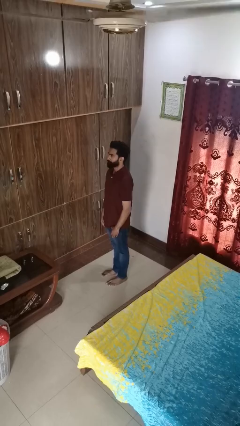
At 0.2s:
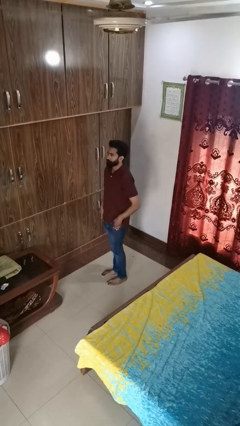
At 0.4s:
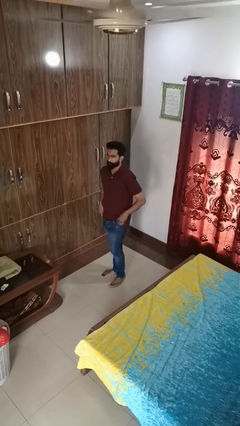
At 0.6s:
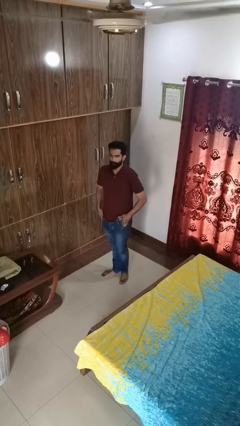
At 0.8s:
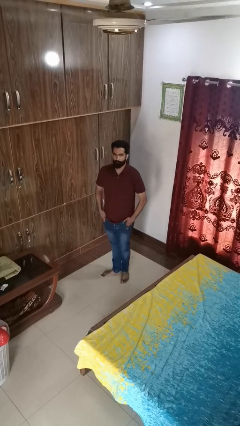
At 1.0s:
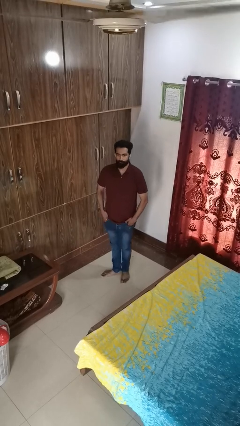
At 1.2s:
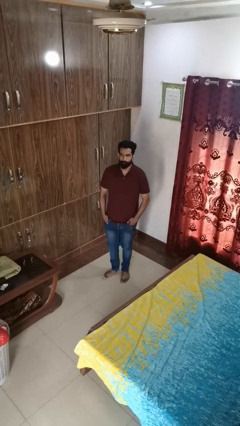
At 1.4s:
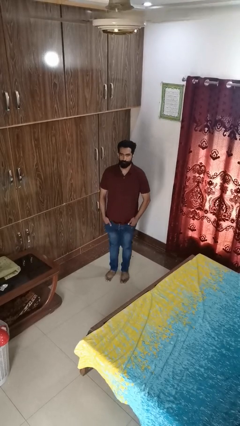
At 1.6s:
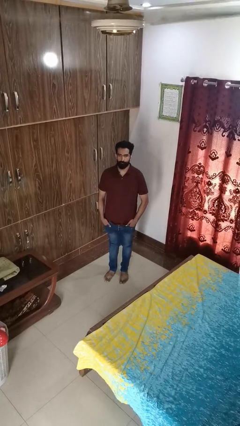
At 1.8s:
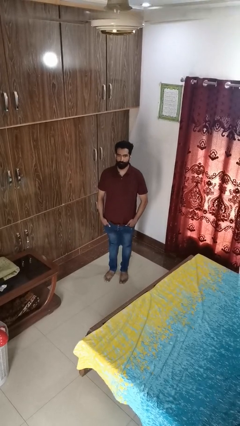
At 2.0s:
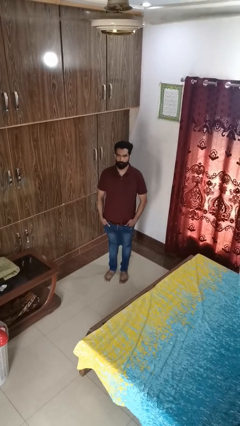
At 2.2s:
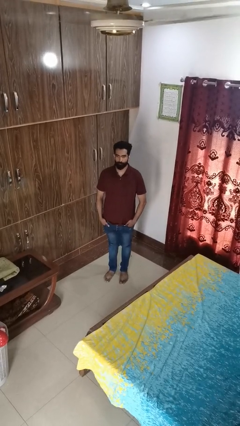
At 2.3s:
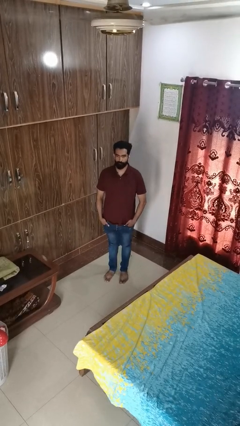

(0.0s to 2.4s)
person puts hands in back pockets

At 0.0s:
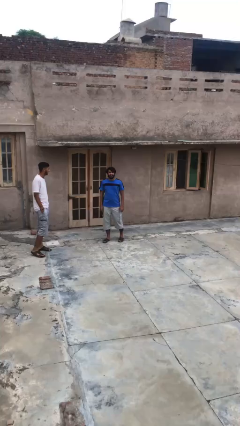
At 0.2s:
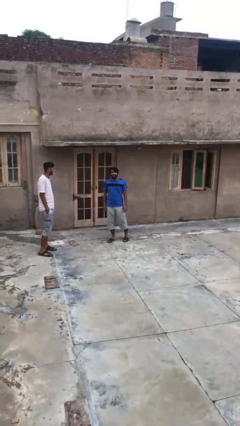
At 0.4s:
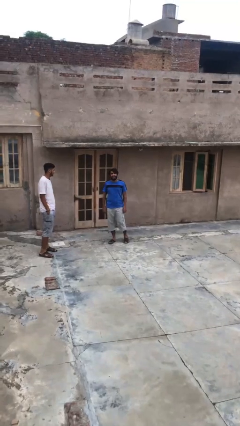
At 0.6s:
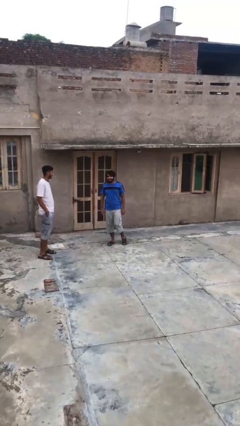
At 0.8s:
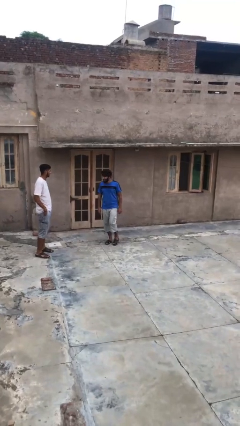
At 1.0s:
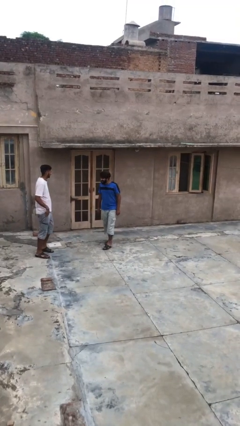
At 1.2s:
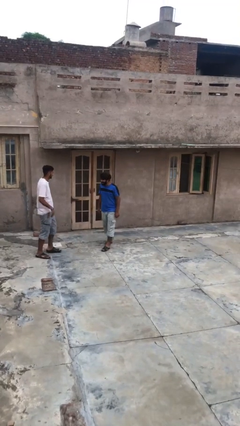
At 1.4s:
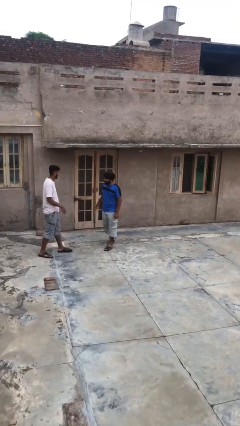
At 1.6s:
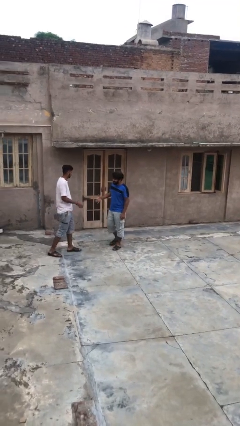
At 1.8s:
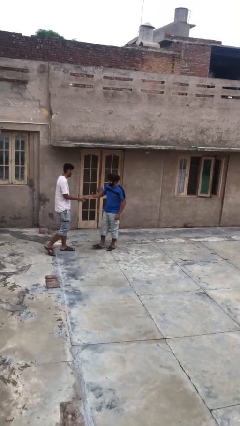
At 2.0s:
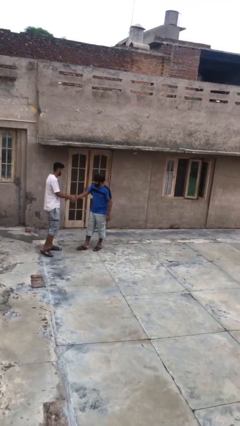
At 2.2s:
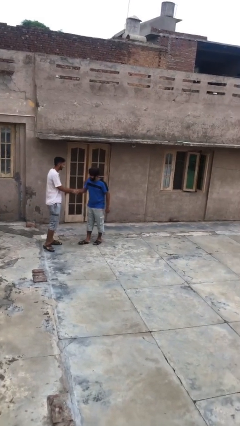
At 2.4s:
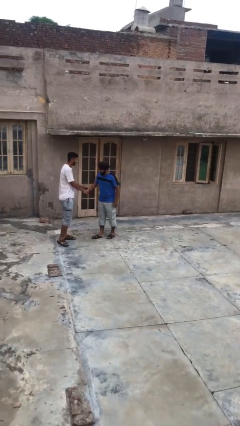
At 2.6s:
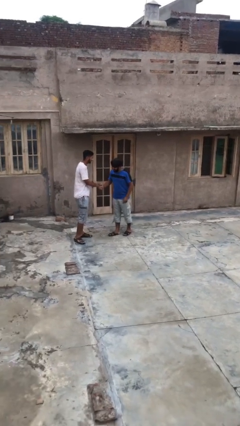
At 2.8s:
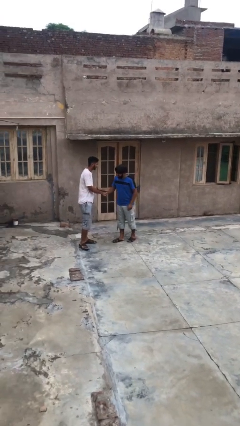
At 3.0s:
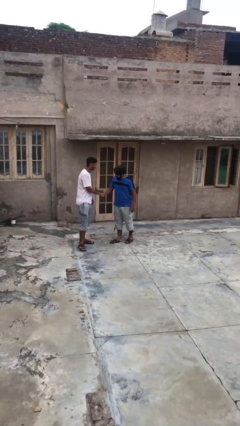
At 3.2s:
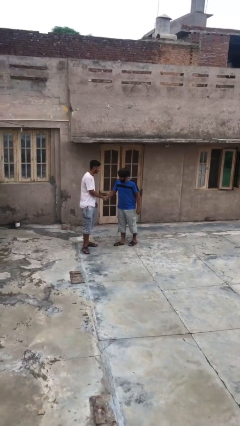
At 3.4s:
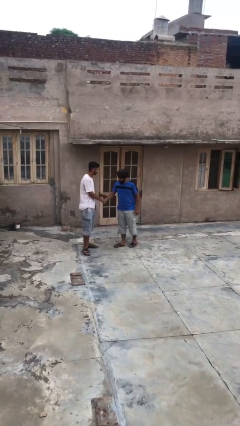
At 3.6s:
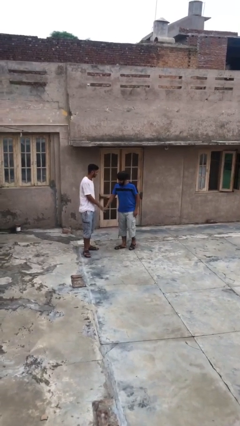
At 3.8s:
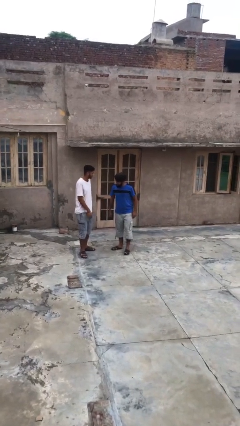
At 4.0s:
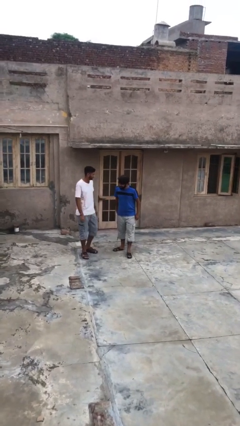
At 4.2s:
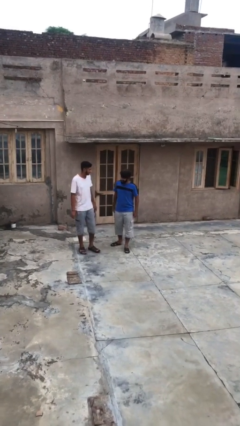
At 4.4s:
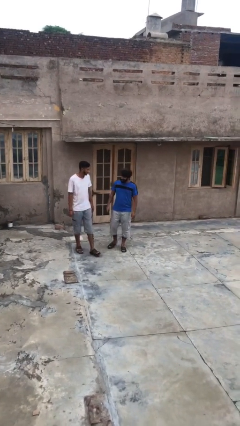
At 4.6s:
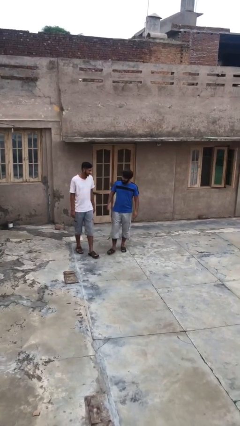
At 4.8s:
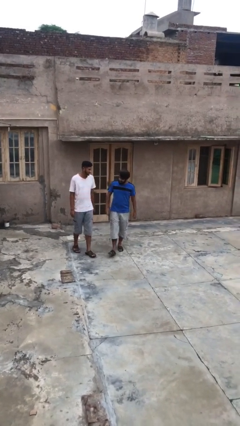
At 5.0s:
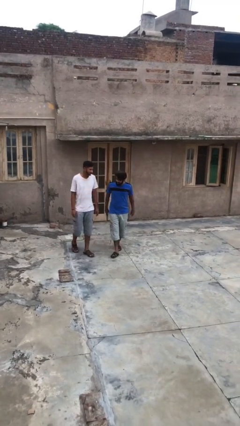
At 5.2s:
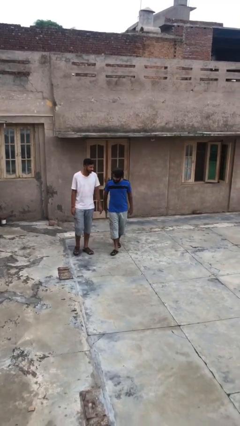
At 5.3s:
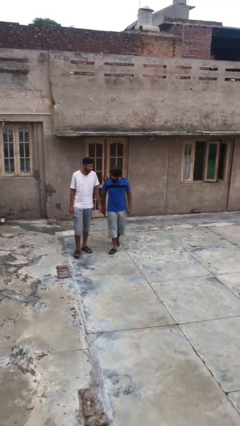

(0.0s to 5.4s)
person shakes hand

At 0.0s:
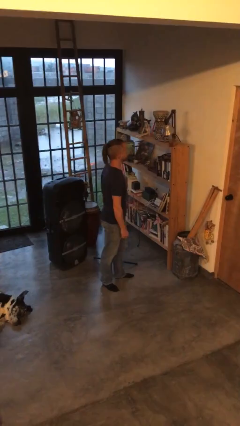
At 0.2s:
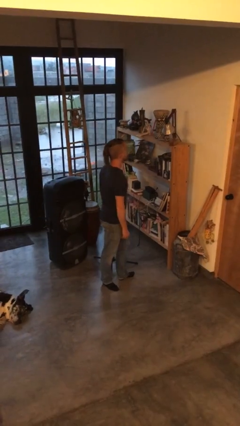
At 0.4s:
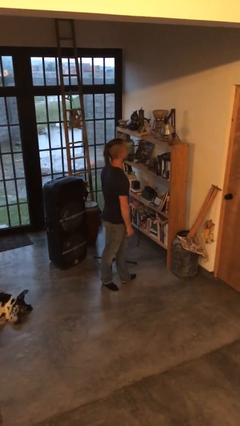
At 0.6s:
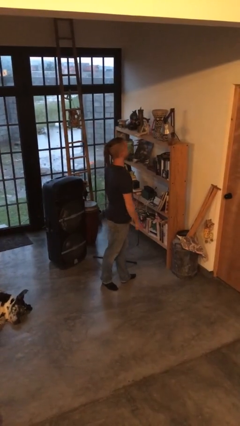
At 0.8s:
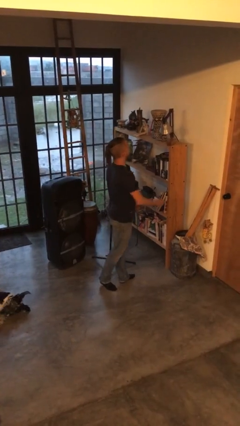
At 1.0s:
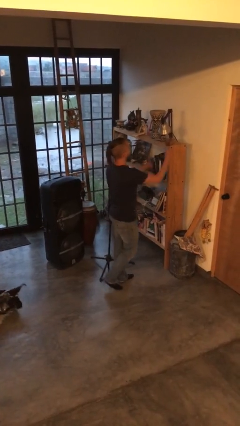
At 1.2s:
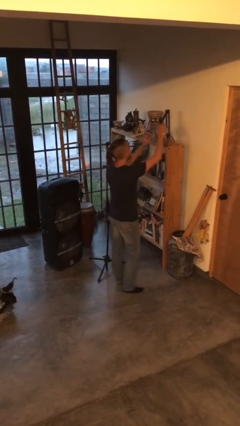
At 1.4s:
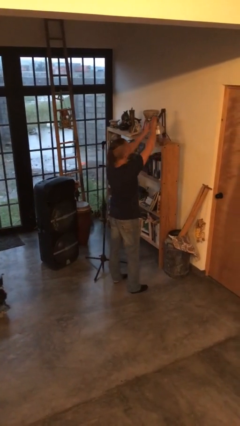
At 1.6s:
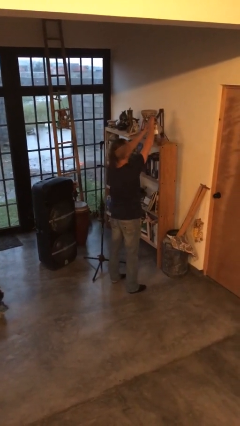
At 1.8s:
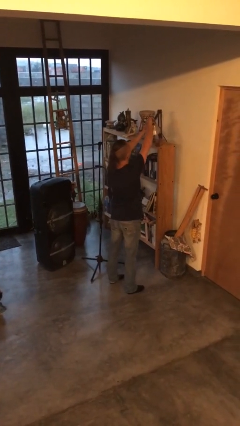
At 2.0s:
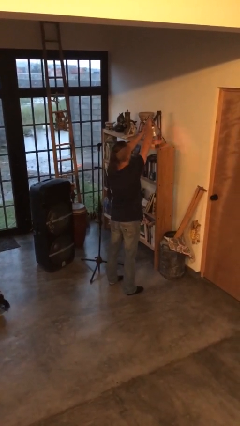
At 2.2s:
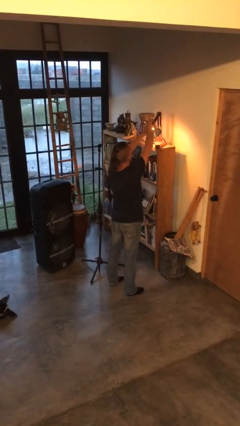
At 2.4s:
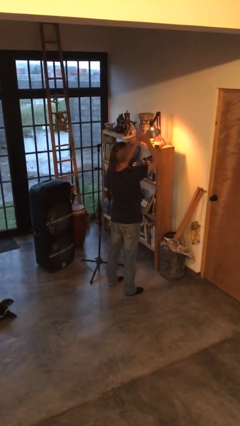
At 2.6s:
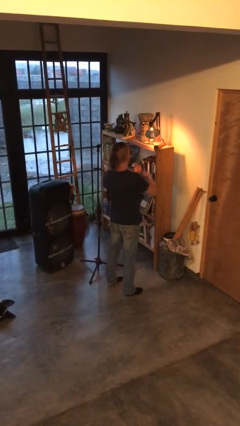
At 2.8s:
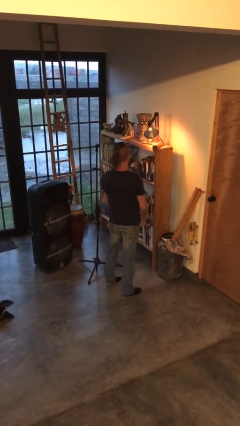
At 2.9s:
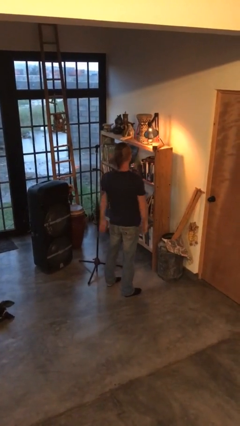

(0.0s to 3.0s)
person turns on lamp

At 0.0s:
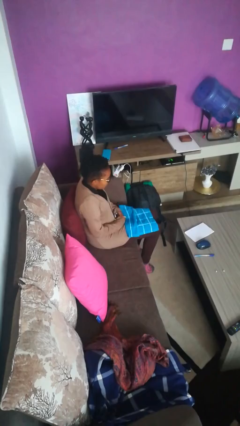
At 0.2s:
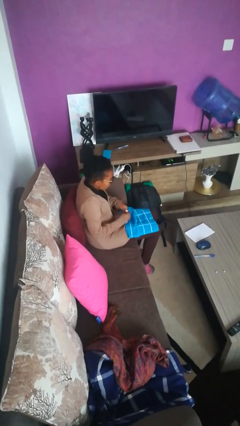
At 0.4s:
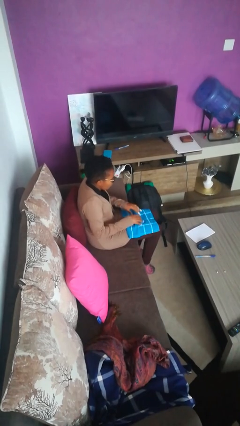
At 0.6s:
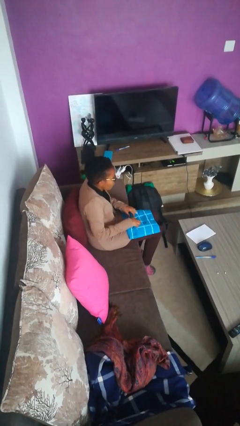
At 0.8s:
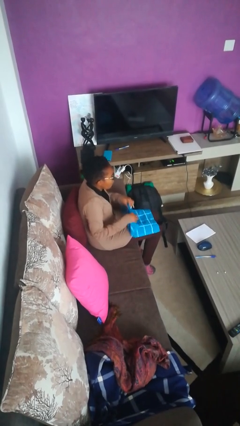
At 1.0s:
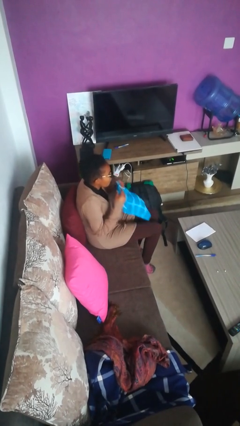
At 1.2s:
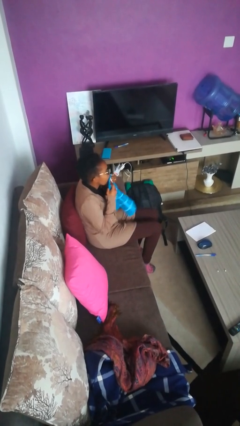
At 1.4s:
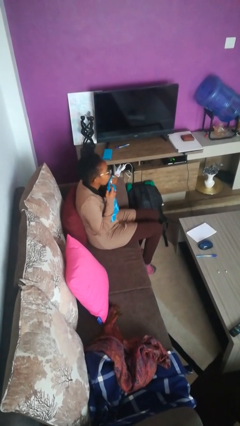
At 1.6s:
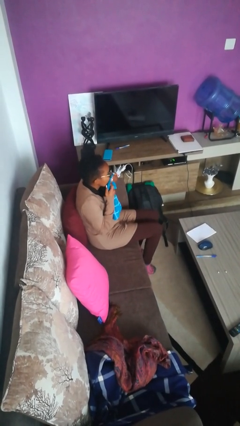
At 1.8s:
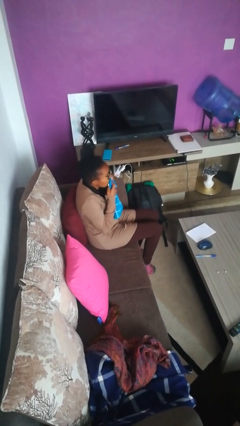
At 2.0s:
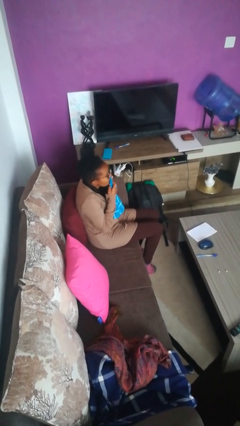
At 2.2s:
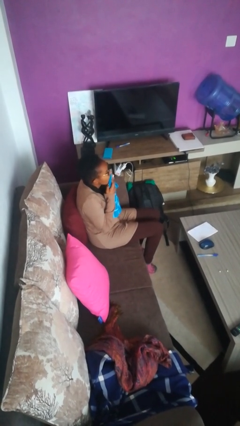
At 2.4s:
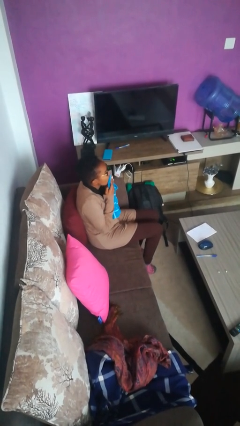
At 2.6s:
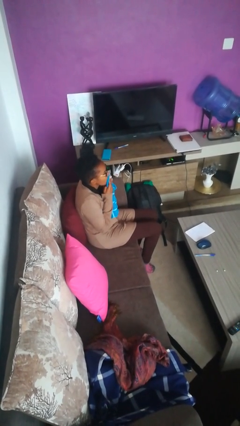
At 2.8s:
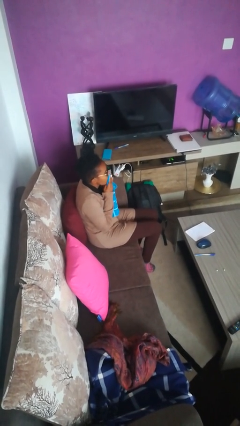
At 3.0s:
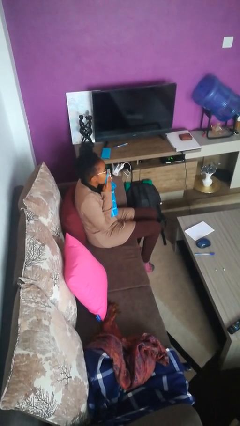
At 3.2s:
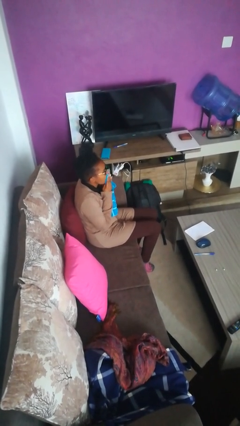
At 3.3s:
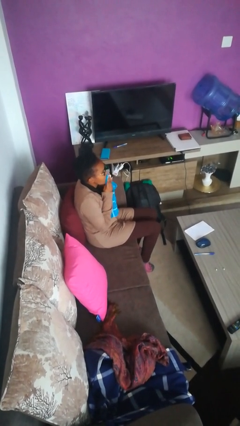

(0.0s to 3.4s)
person wipes mouth with napkin

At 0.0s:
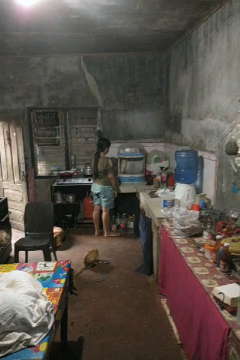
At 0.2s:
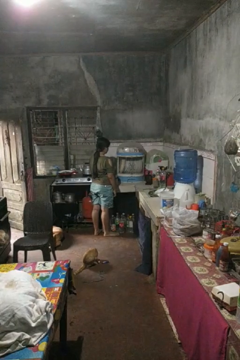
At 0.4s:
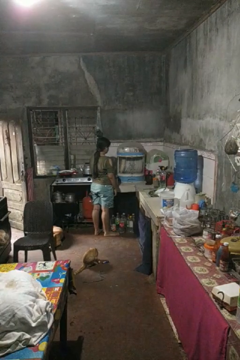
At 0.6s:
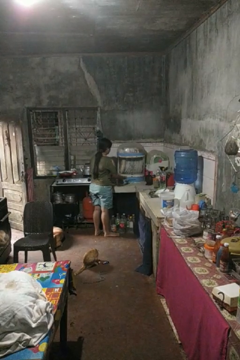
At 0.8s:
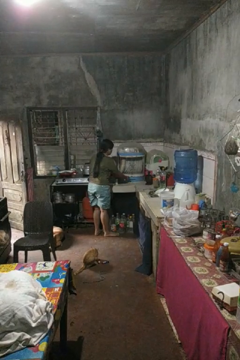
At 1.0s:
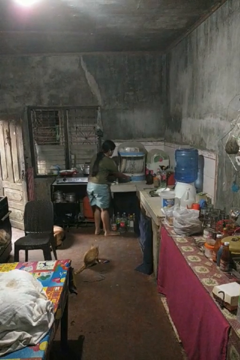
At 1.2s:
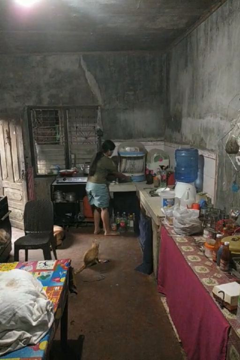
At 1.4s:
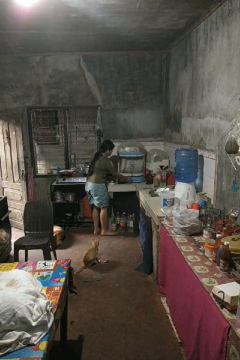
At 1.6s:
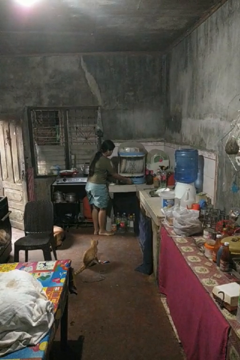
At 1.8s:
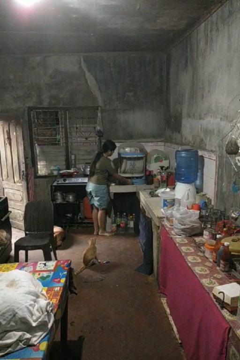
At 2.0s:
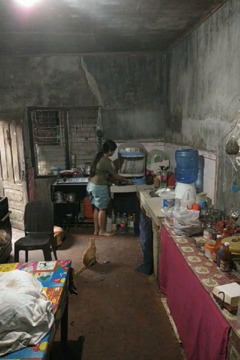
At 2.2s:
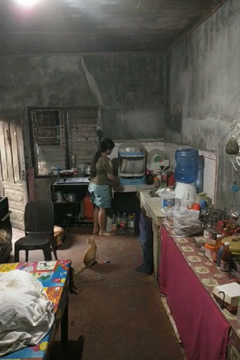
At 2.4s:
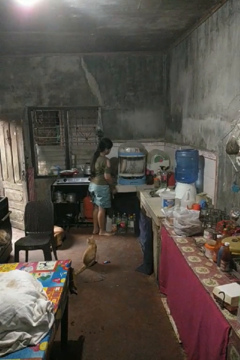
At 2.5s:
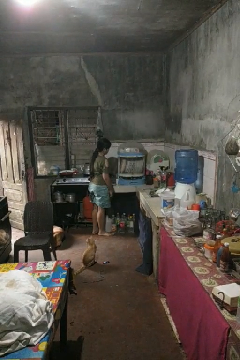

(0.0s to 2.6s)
person opens kitchen drawer

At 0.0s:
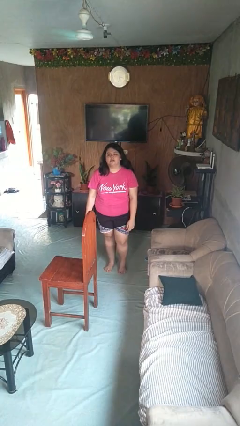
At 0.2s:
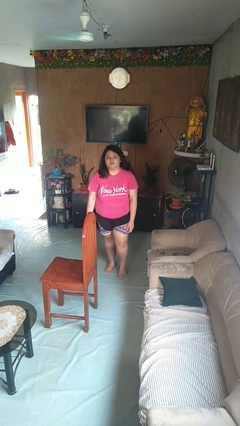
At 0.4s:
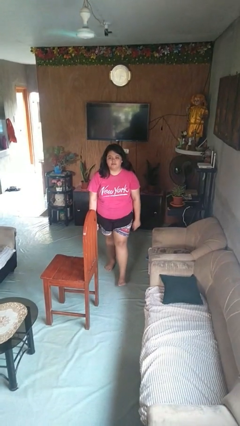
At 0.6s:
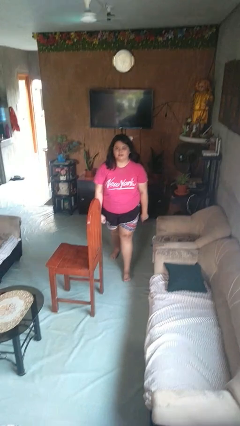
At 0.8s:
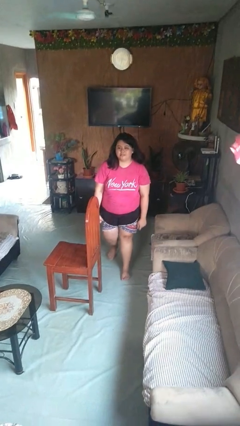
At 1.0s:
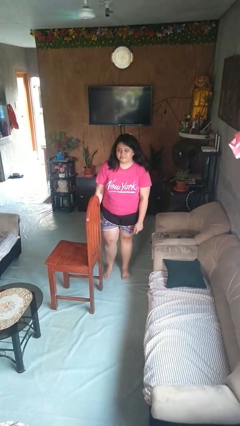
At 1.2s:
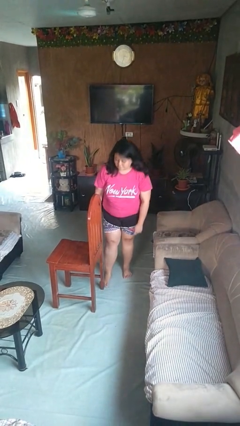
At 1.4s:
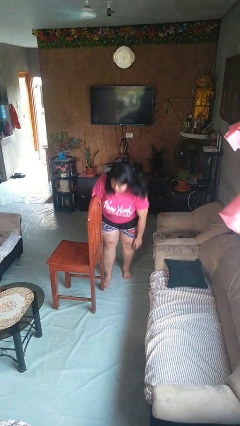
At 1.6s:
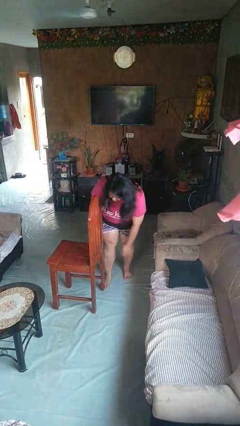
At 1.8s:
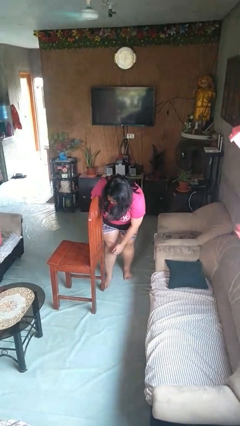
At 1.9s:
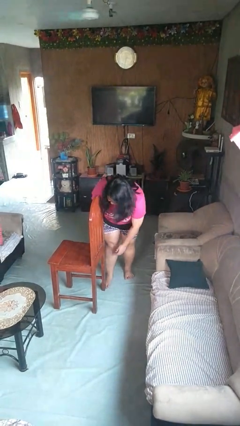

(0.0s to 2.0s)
person stubs toe
